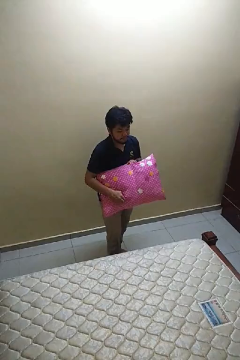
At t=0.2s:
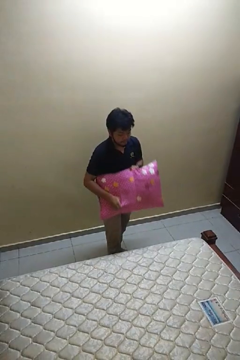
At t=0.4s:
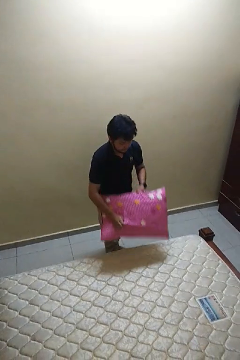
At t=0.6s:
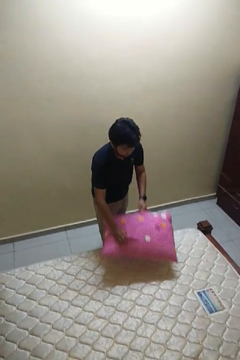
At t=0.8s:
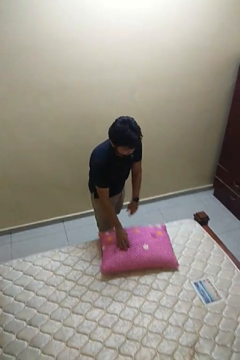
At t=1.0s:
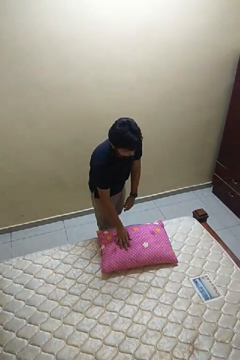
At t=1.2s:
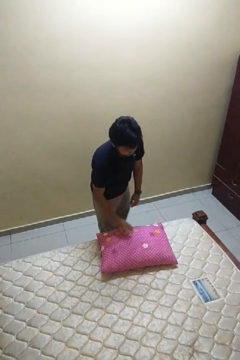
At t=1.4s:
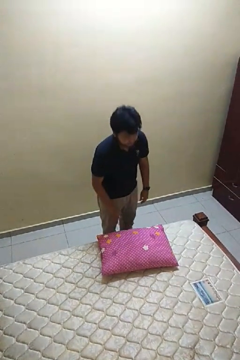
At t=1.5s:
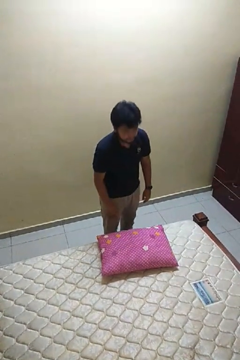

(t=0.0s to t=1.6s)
person puts down object on bed

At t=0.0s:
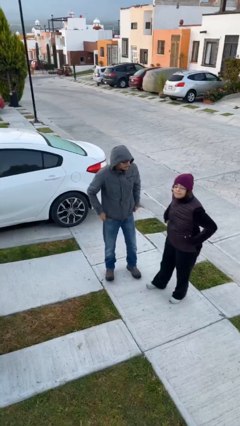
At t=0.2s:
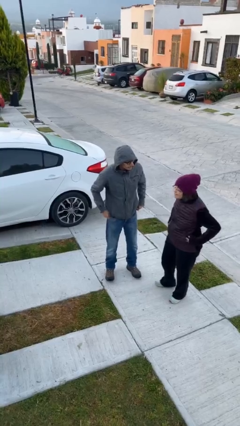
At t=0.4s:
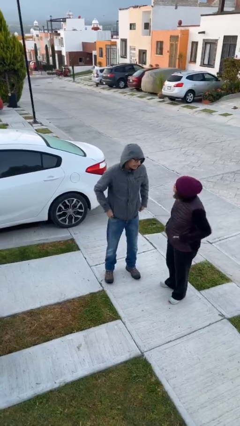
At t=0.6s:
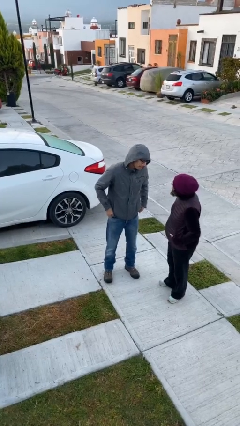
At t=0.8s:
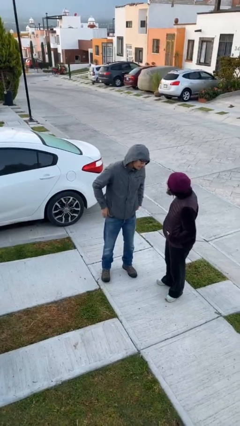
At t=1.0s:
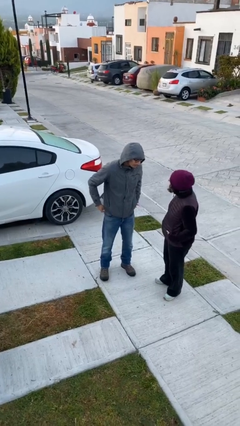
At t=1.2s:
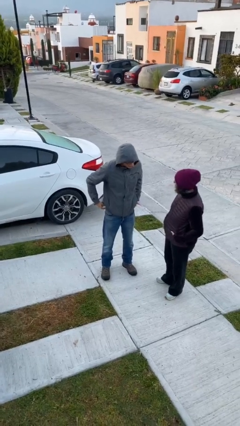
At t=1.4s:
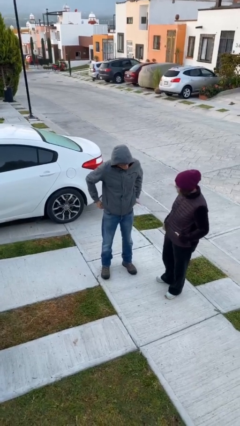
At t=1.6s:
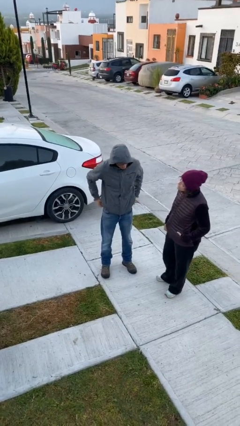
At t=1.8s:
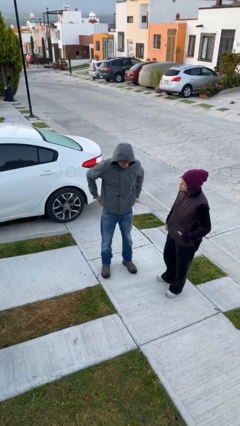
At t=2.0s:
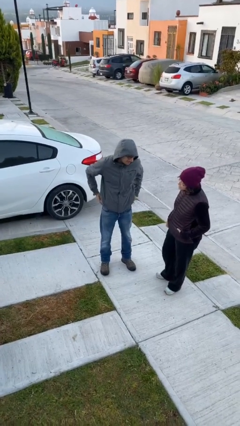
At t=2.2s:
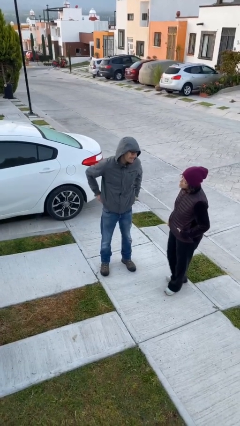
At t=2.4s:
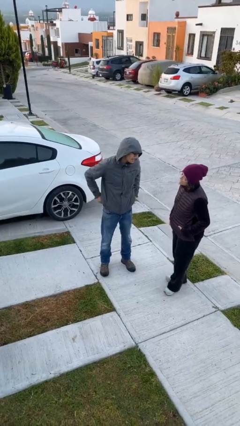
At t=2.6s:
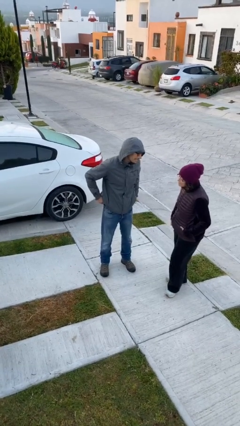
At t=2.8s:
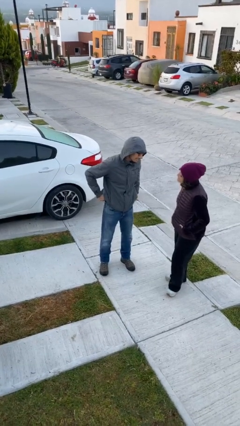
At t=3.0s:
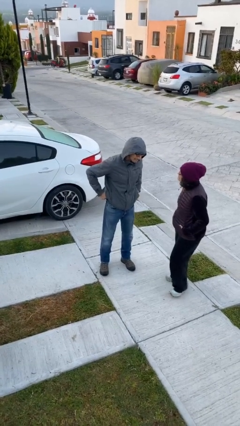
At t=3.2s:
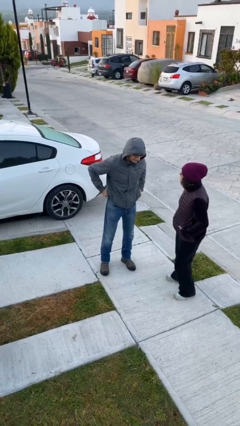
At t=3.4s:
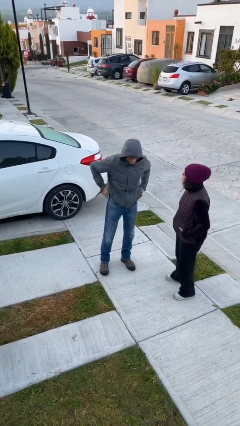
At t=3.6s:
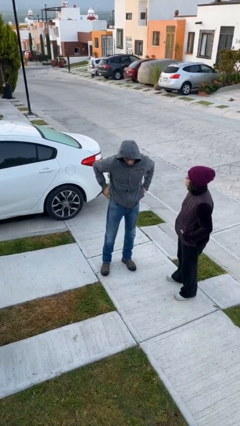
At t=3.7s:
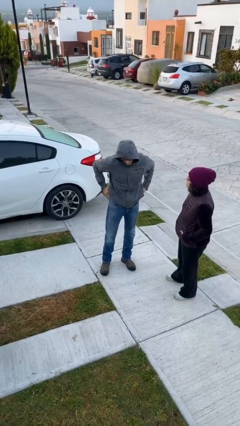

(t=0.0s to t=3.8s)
person talks to person

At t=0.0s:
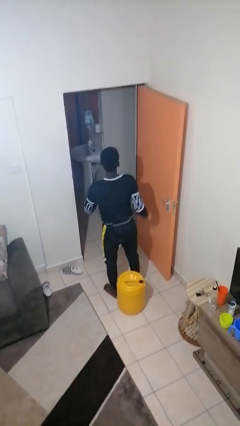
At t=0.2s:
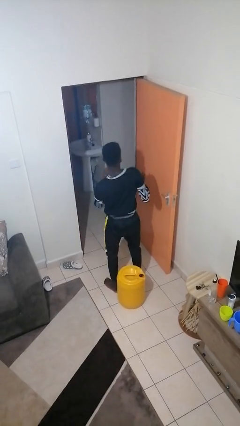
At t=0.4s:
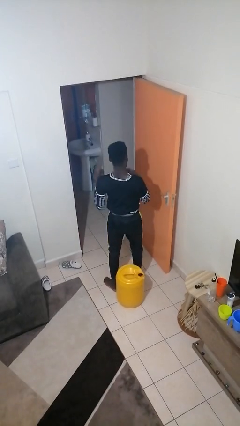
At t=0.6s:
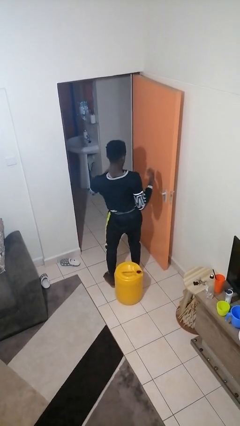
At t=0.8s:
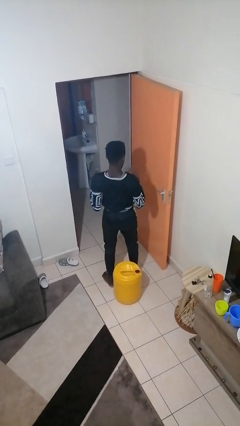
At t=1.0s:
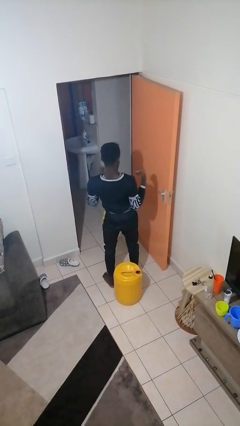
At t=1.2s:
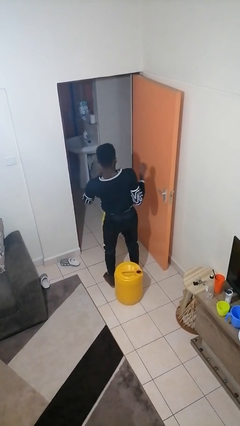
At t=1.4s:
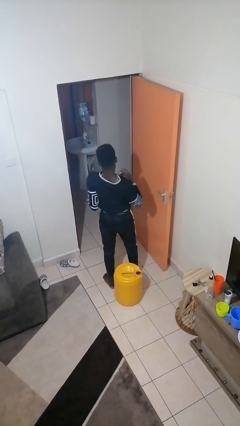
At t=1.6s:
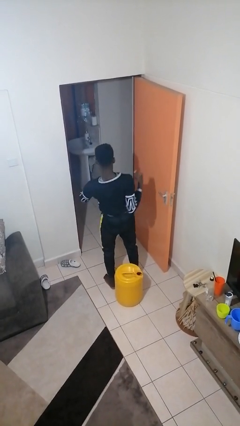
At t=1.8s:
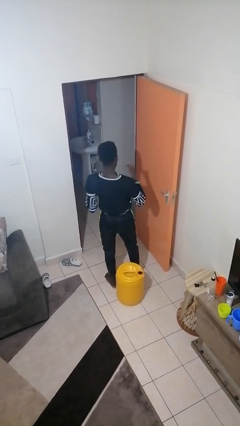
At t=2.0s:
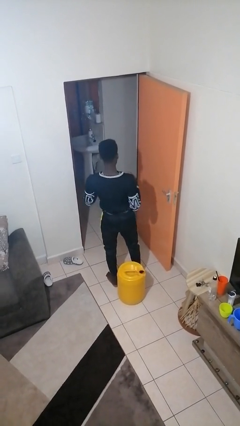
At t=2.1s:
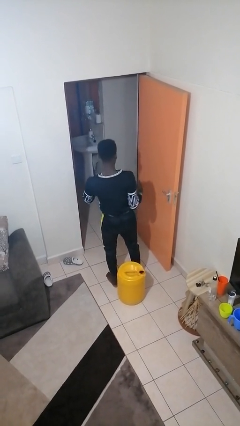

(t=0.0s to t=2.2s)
person drums on chest

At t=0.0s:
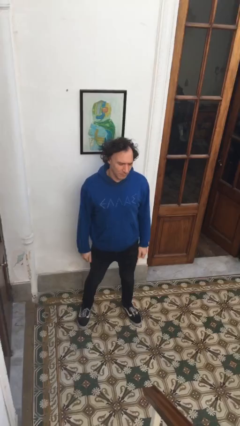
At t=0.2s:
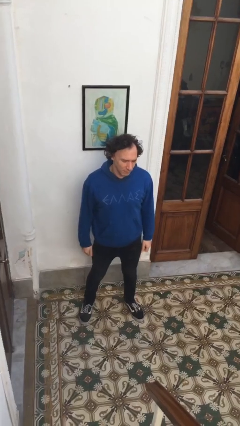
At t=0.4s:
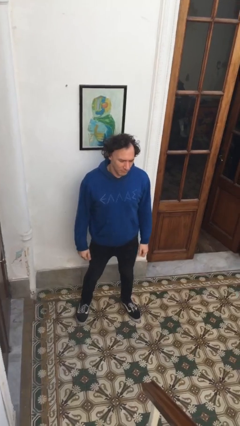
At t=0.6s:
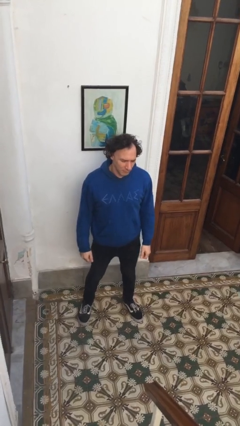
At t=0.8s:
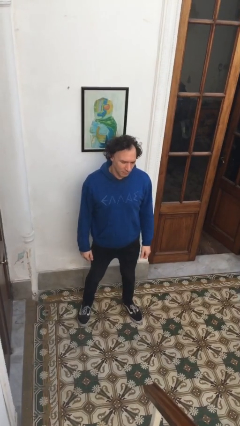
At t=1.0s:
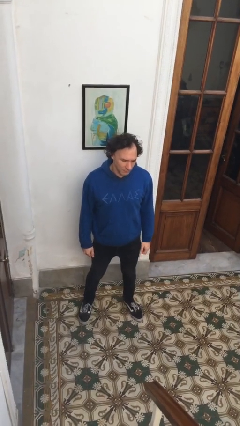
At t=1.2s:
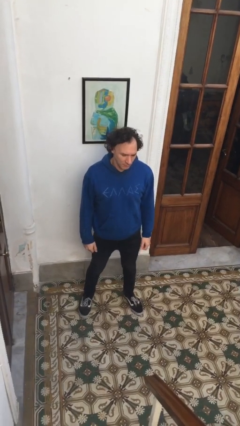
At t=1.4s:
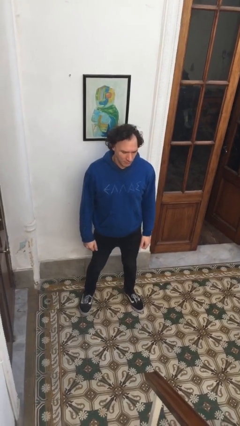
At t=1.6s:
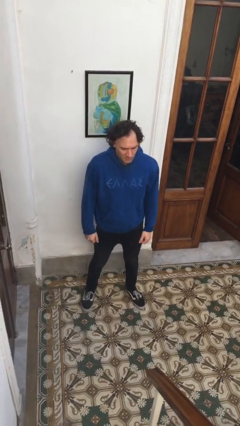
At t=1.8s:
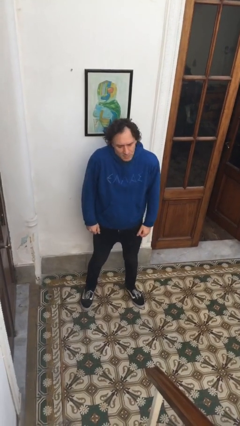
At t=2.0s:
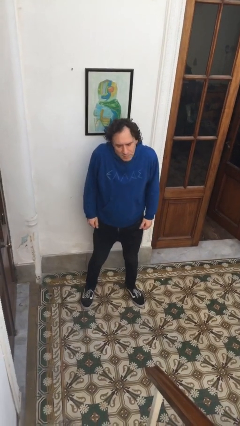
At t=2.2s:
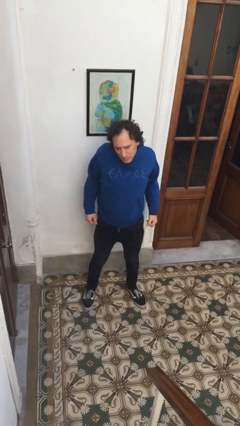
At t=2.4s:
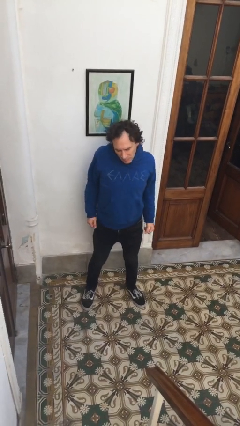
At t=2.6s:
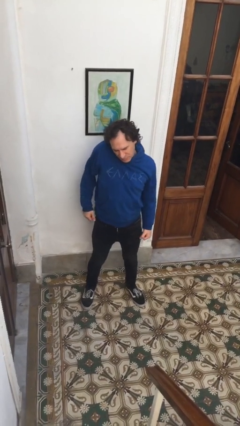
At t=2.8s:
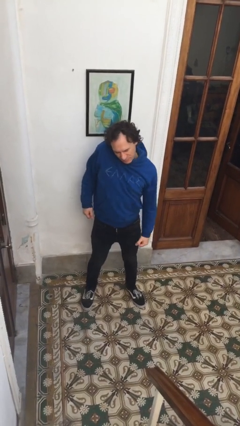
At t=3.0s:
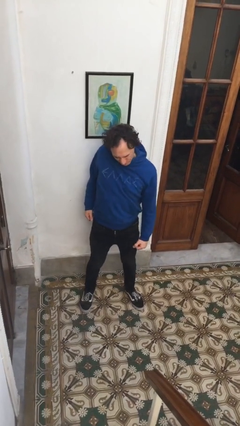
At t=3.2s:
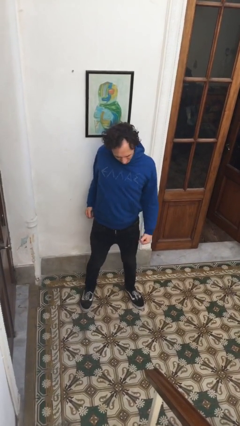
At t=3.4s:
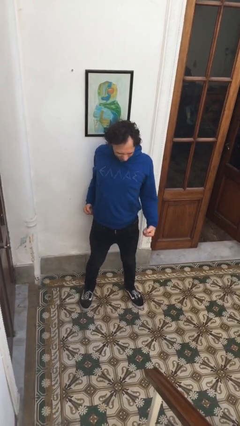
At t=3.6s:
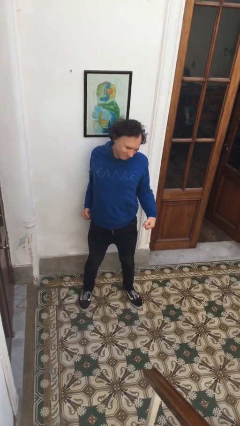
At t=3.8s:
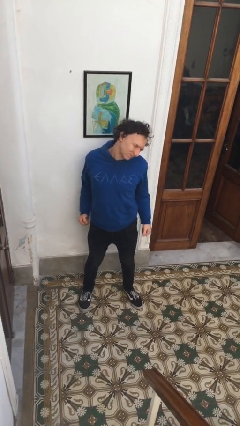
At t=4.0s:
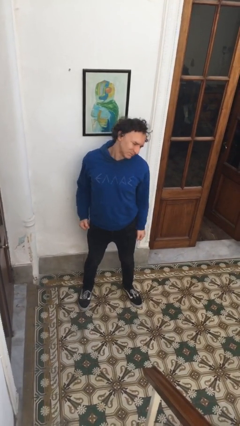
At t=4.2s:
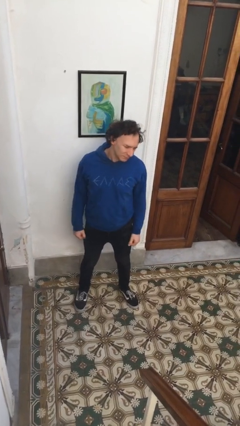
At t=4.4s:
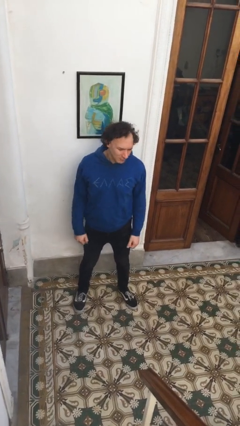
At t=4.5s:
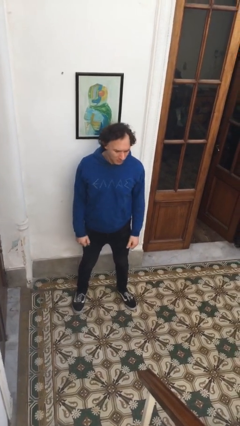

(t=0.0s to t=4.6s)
person stretches back

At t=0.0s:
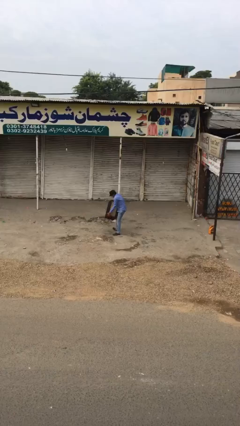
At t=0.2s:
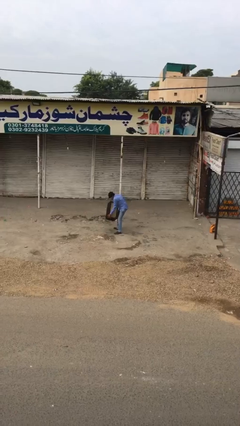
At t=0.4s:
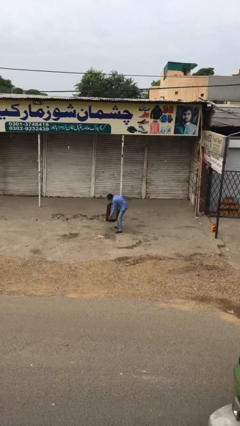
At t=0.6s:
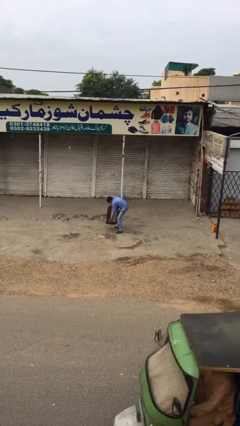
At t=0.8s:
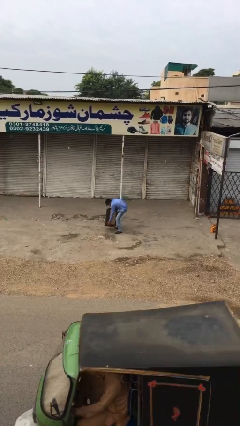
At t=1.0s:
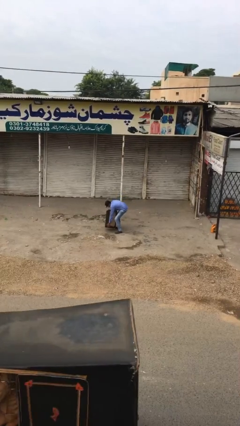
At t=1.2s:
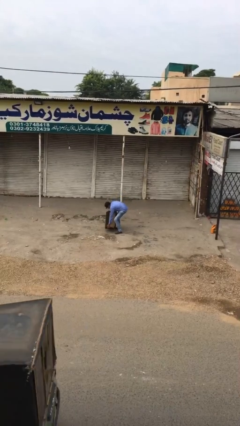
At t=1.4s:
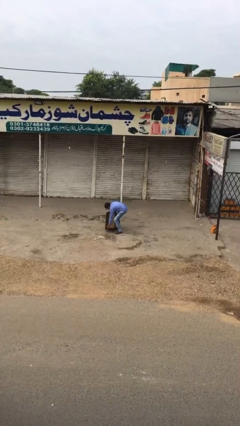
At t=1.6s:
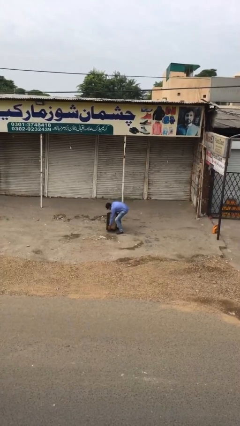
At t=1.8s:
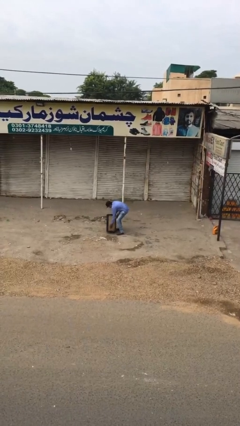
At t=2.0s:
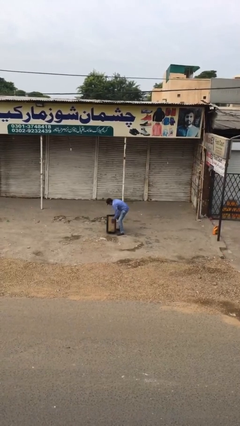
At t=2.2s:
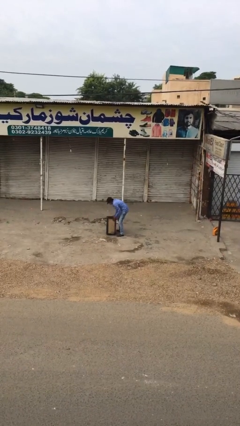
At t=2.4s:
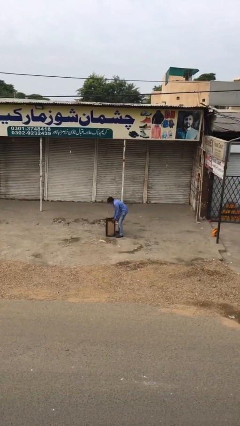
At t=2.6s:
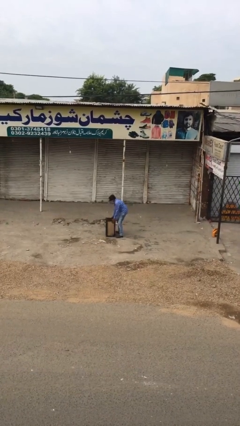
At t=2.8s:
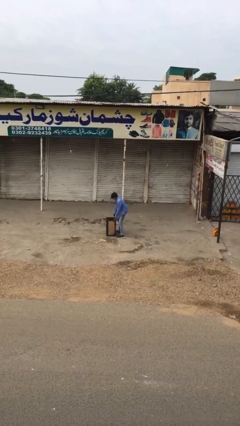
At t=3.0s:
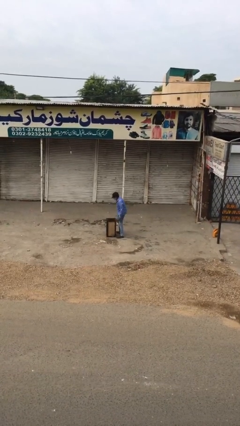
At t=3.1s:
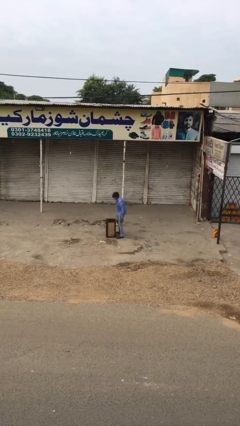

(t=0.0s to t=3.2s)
person puts down object on floor

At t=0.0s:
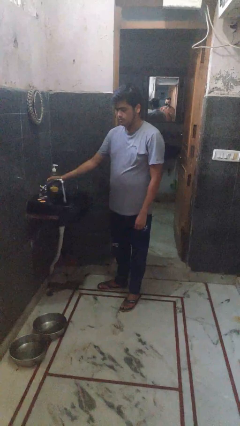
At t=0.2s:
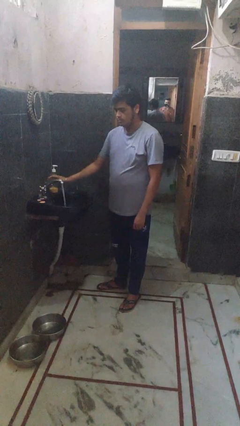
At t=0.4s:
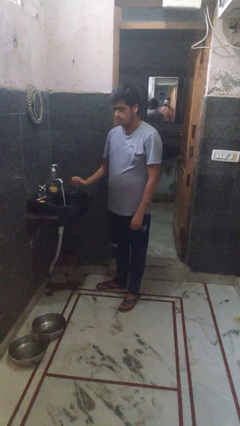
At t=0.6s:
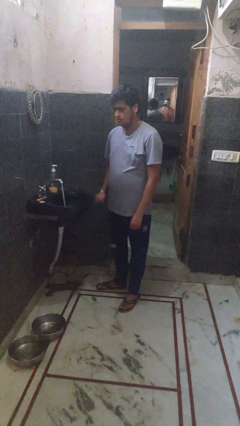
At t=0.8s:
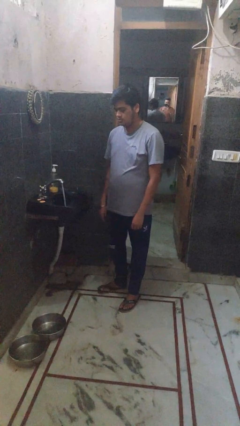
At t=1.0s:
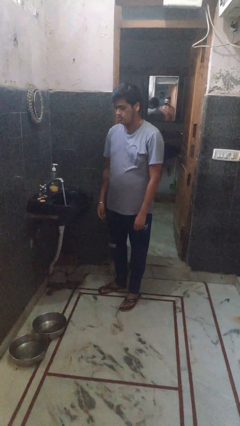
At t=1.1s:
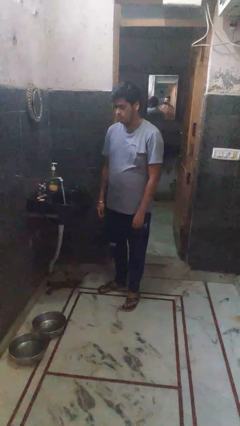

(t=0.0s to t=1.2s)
person turns on faucet

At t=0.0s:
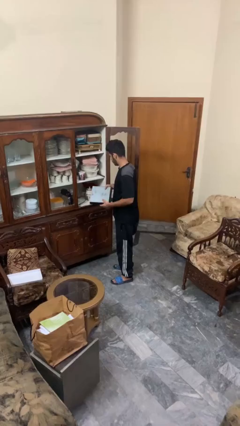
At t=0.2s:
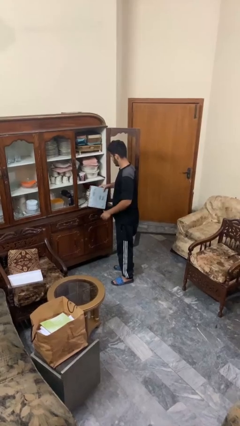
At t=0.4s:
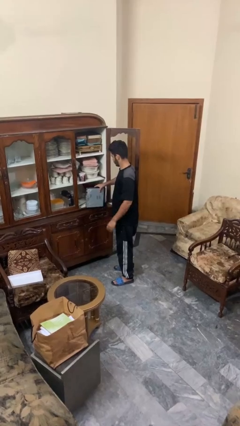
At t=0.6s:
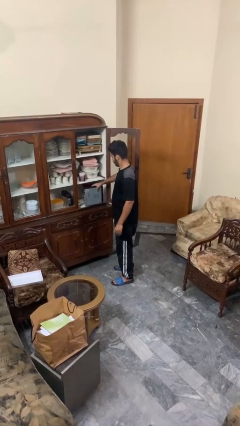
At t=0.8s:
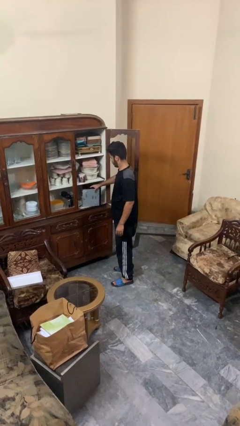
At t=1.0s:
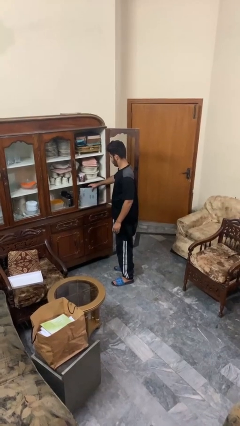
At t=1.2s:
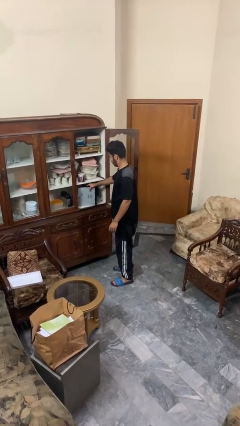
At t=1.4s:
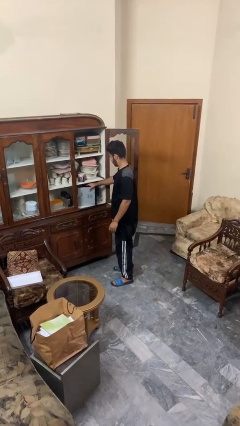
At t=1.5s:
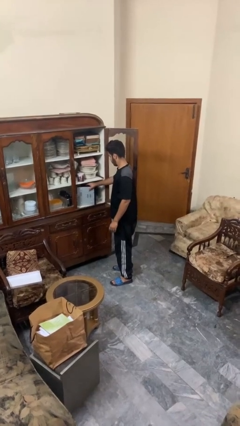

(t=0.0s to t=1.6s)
person puts down object into cabinet
